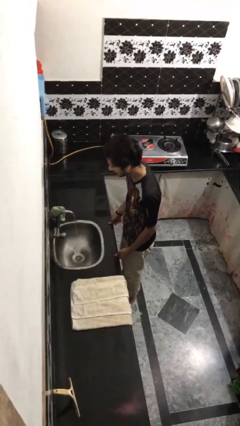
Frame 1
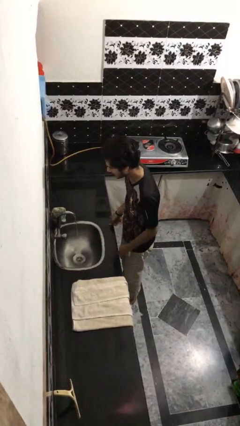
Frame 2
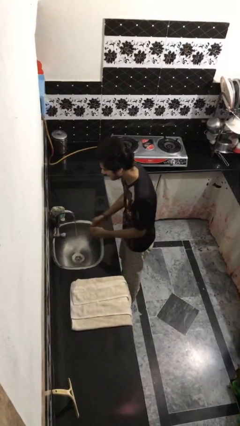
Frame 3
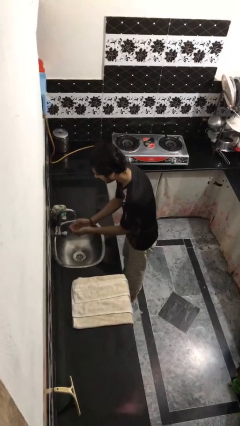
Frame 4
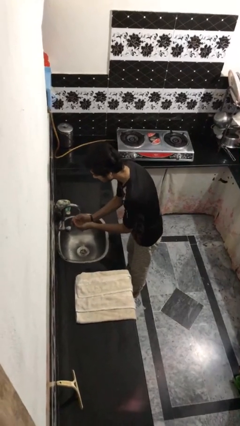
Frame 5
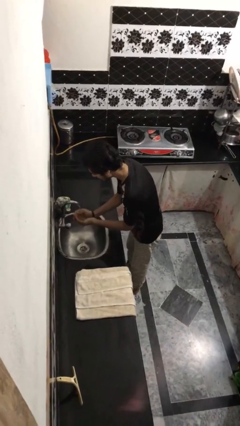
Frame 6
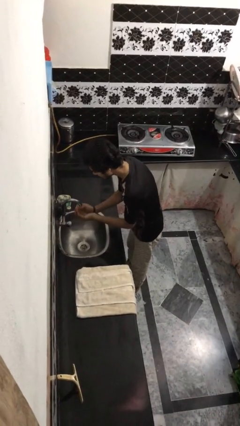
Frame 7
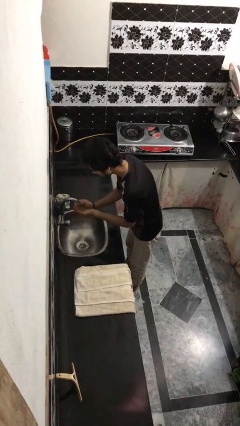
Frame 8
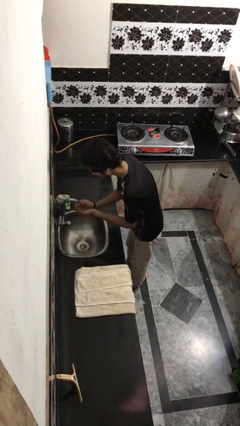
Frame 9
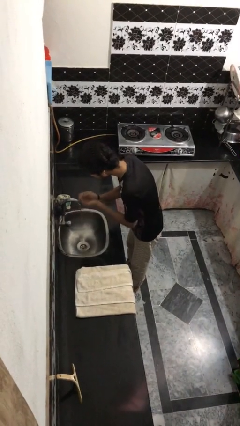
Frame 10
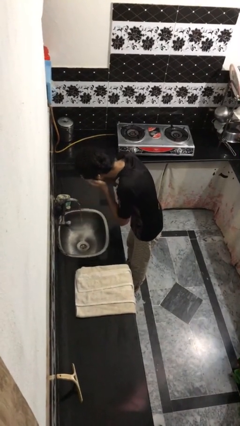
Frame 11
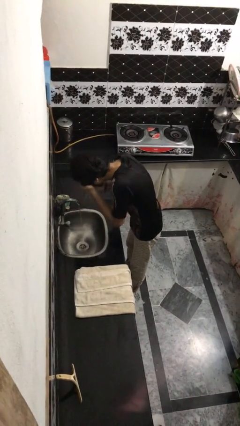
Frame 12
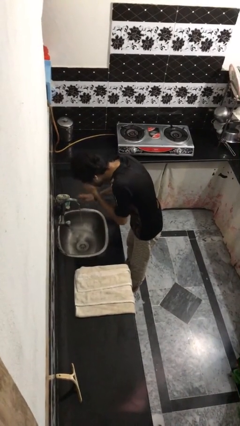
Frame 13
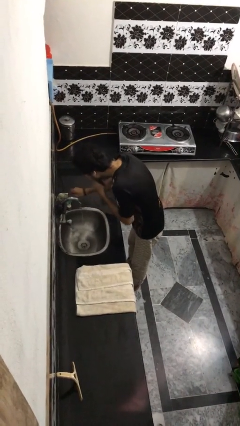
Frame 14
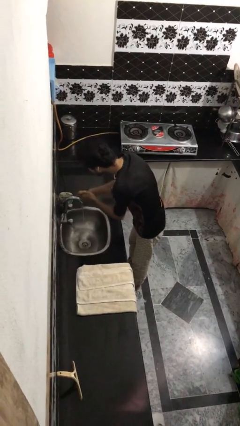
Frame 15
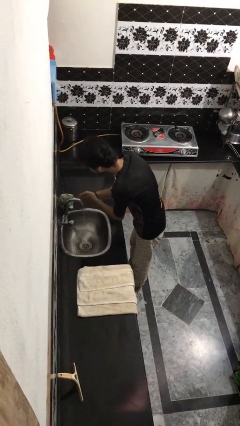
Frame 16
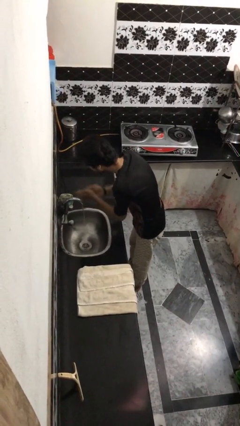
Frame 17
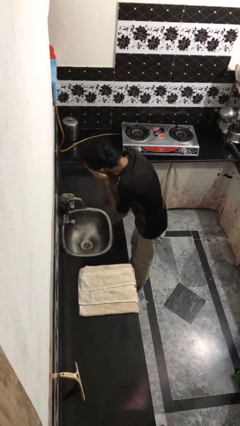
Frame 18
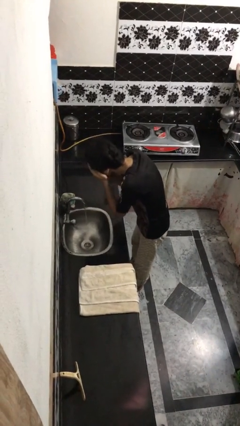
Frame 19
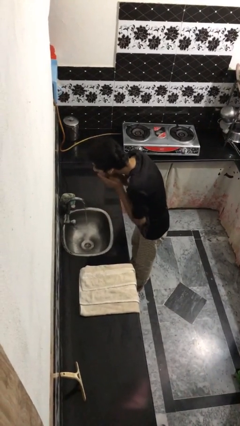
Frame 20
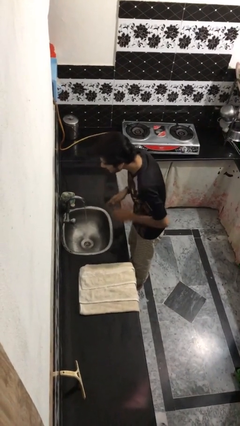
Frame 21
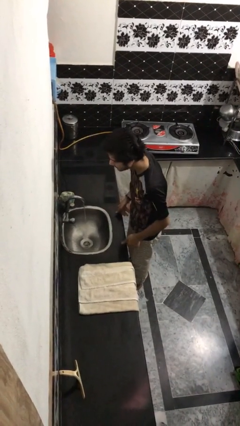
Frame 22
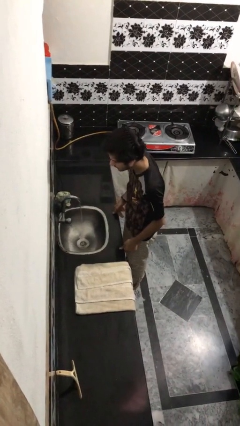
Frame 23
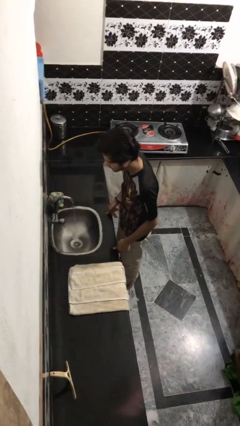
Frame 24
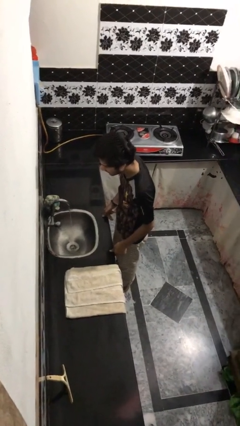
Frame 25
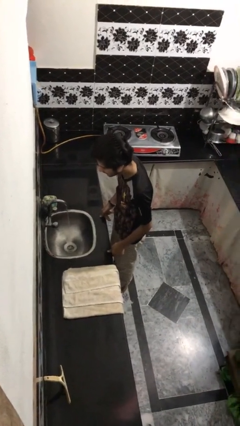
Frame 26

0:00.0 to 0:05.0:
person washes face

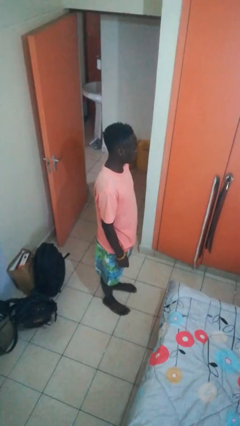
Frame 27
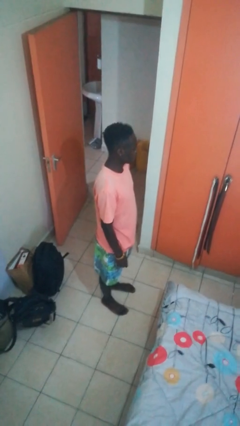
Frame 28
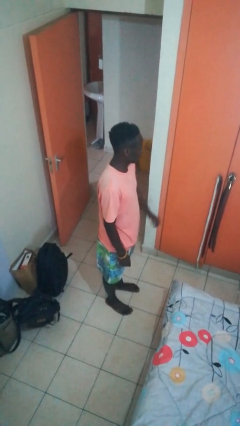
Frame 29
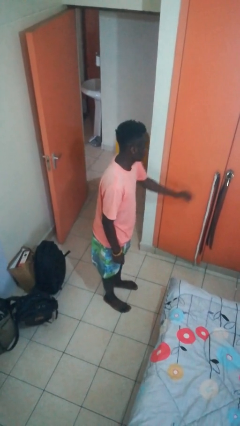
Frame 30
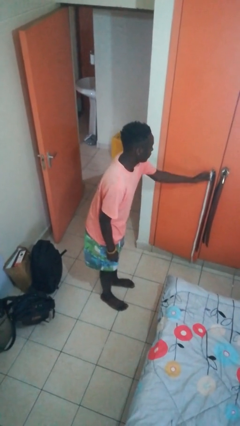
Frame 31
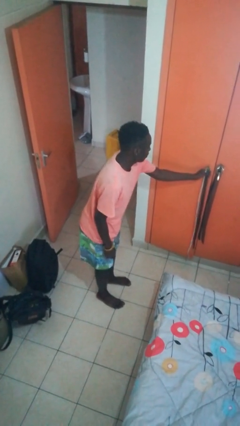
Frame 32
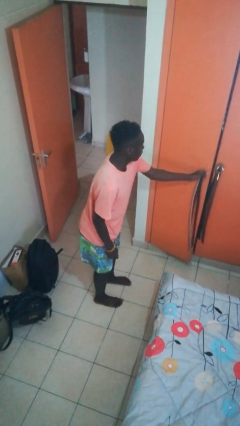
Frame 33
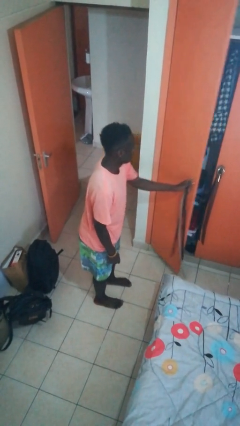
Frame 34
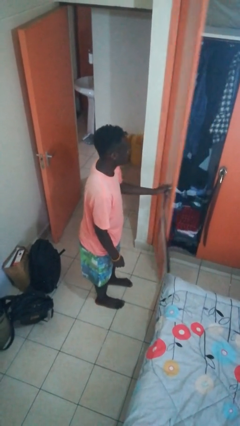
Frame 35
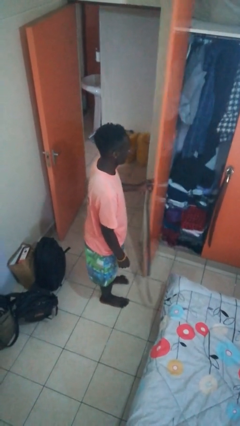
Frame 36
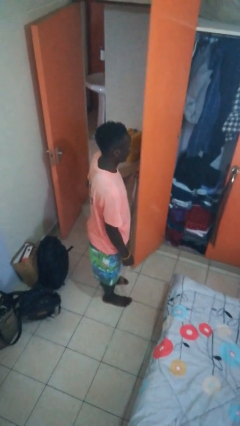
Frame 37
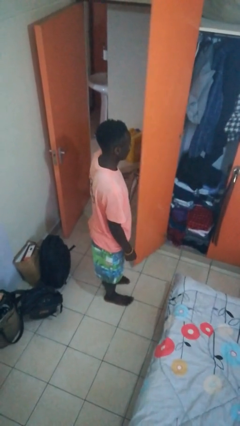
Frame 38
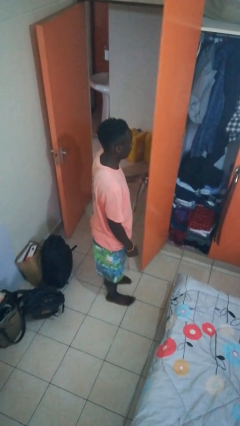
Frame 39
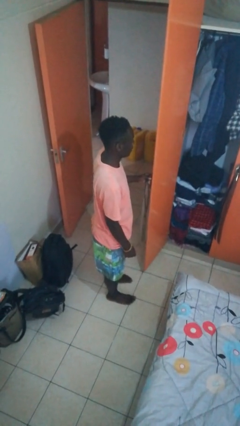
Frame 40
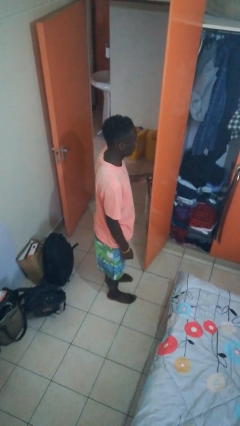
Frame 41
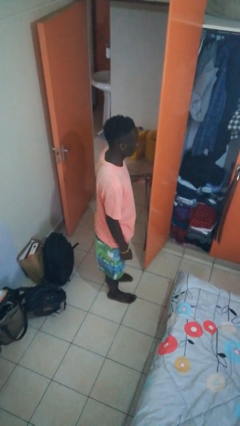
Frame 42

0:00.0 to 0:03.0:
person opens closet door

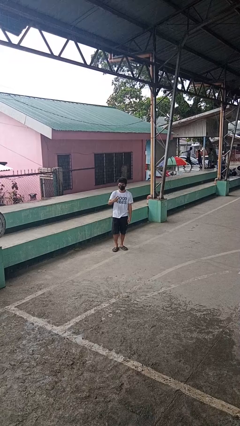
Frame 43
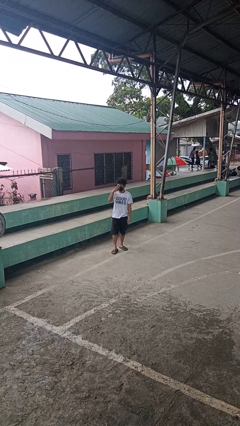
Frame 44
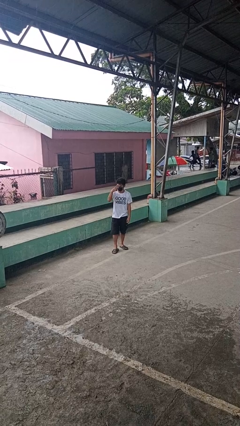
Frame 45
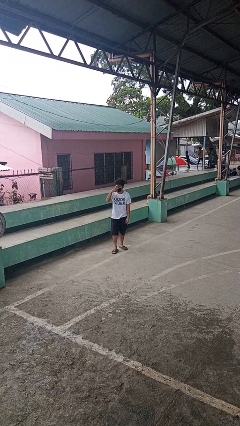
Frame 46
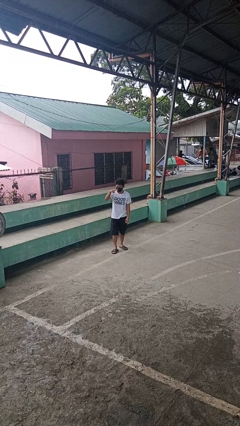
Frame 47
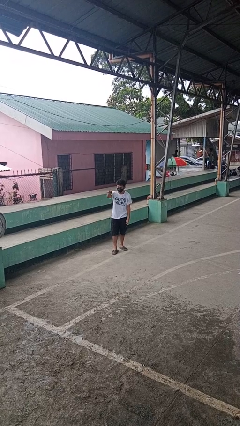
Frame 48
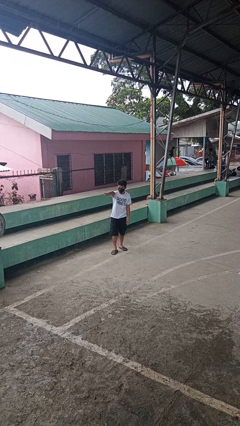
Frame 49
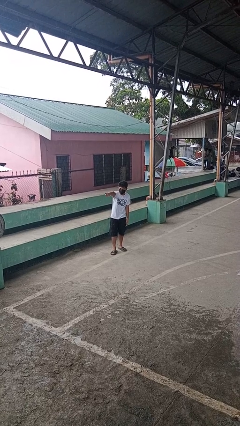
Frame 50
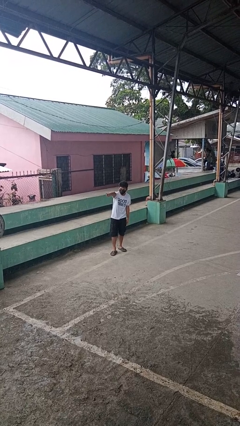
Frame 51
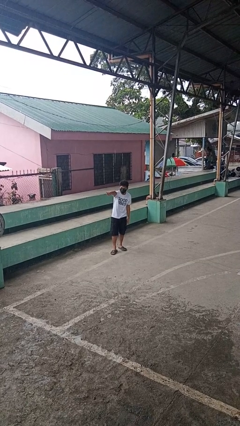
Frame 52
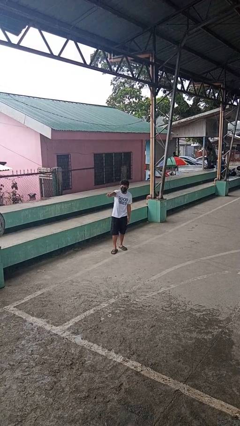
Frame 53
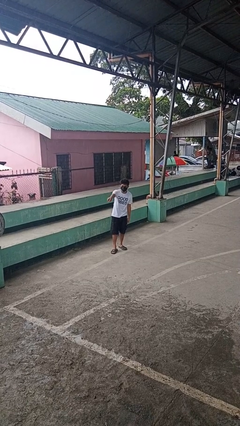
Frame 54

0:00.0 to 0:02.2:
person gestures watch closely

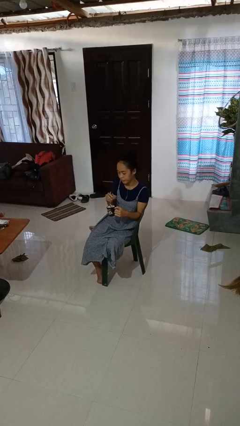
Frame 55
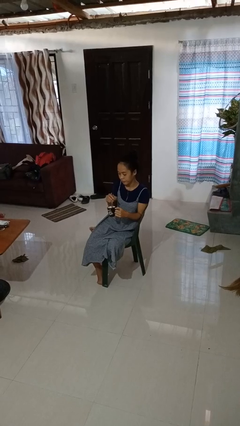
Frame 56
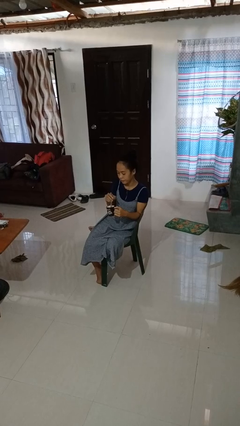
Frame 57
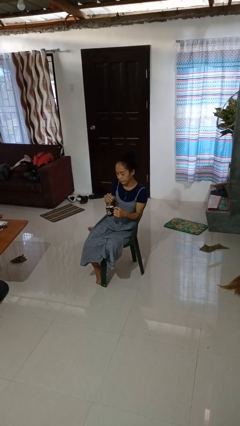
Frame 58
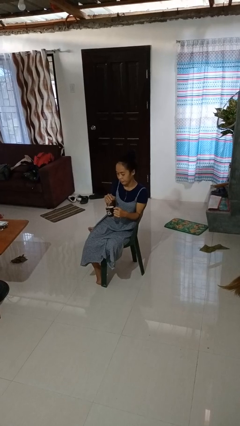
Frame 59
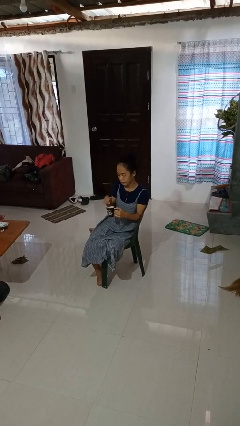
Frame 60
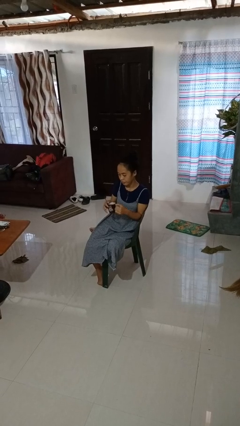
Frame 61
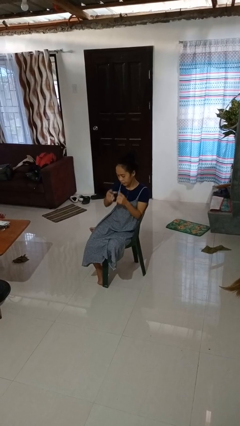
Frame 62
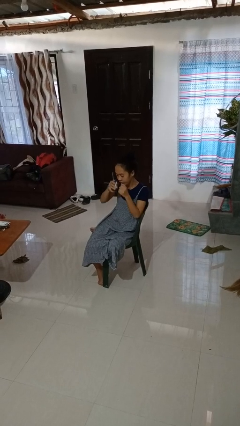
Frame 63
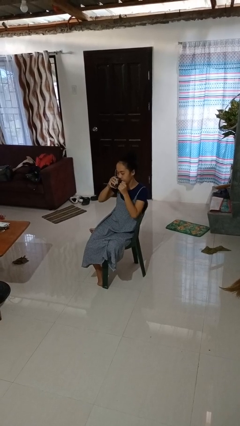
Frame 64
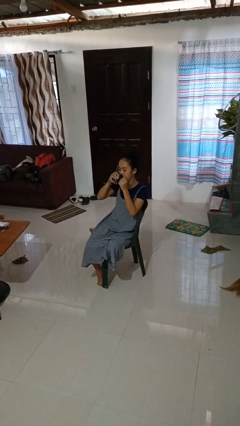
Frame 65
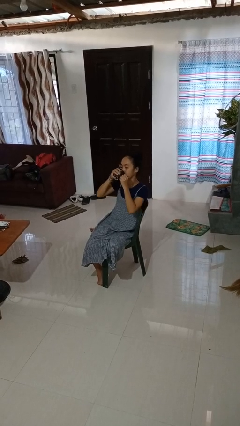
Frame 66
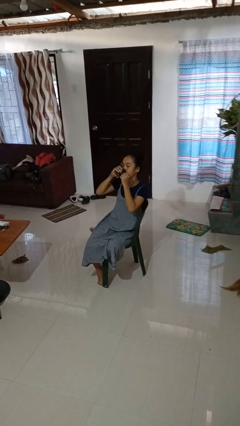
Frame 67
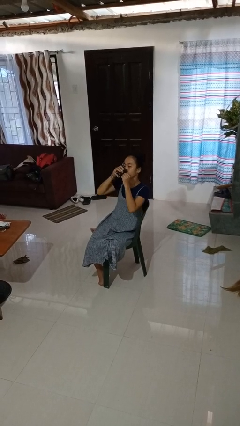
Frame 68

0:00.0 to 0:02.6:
person stirs mug

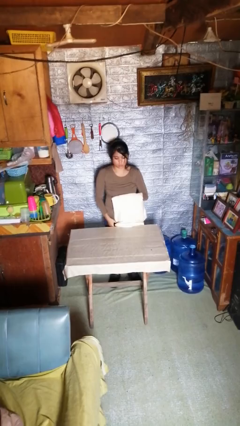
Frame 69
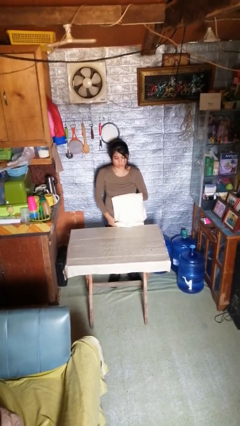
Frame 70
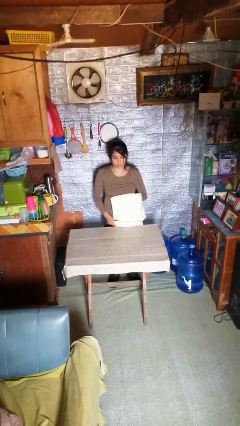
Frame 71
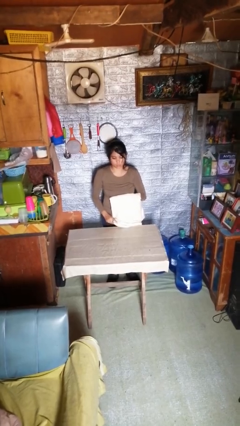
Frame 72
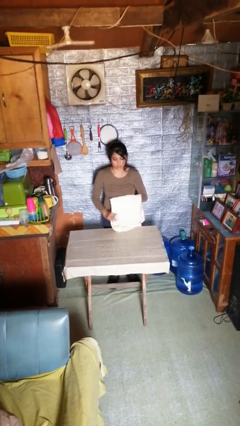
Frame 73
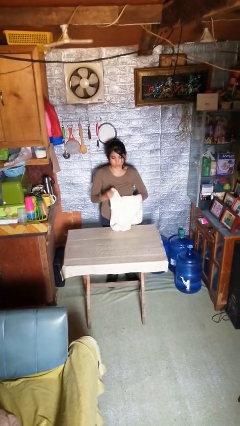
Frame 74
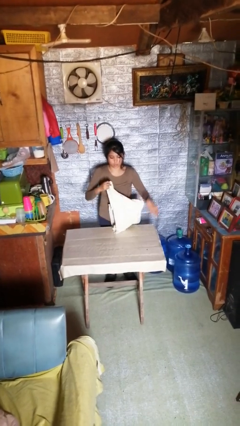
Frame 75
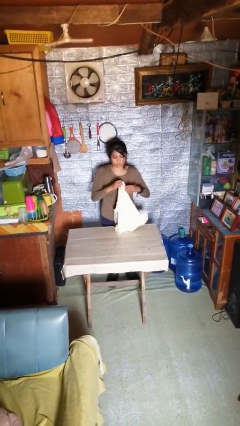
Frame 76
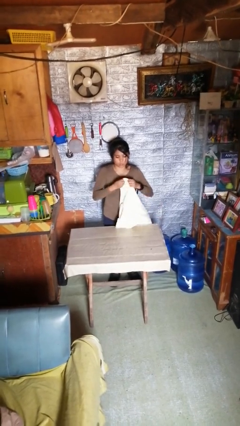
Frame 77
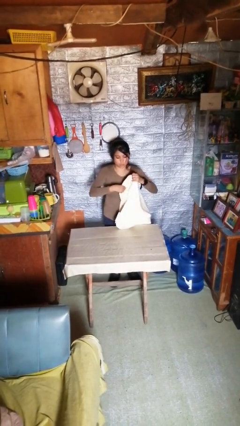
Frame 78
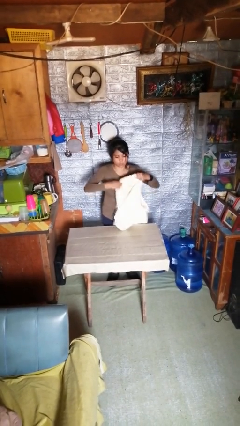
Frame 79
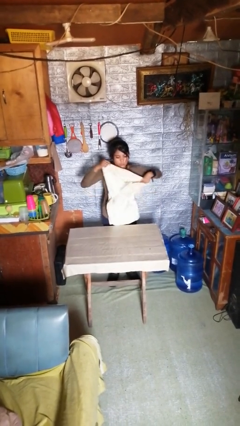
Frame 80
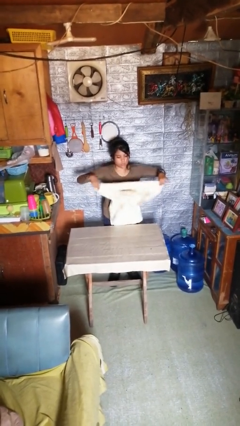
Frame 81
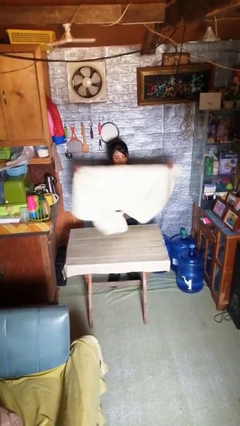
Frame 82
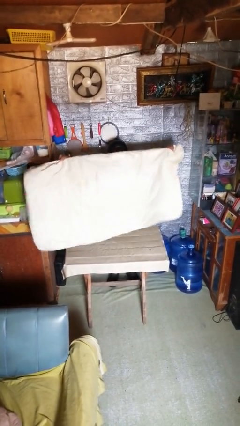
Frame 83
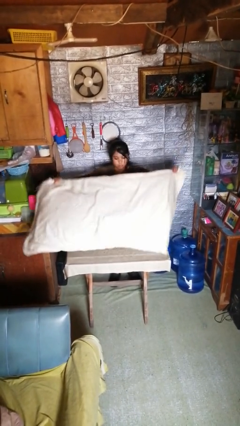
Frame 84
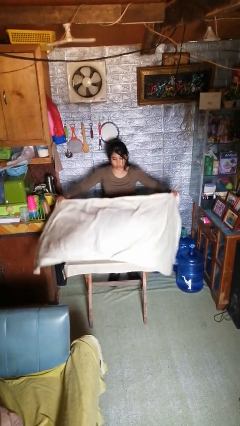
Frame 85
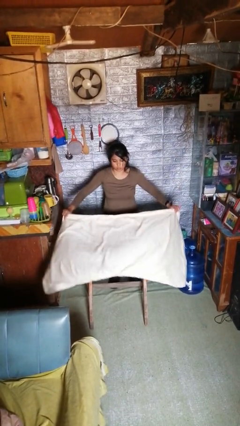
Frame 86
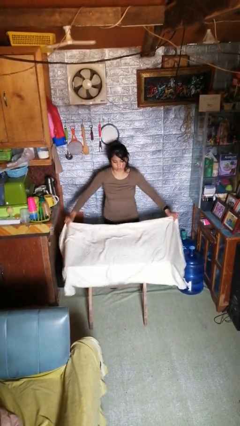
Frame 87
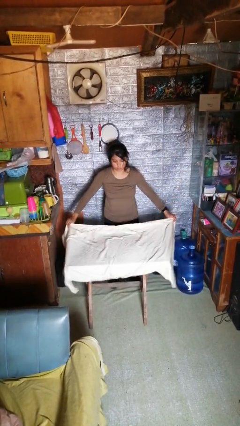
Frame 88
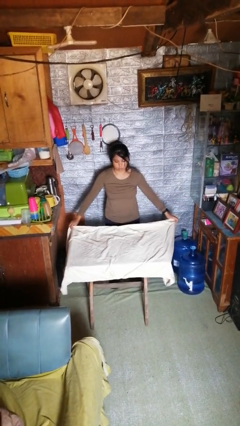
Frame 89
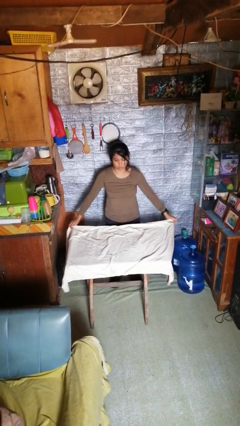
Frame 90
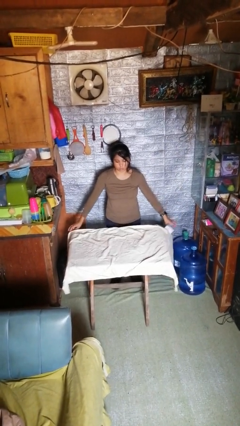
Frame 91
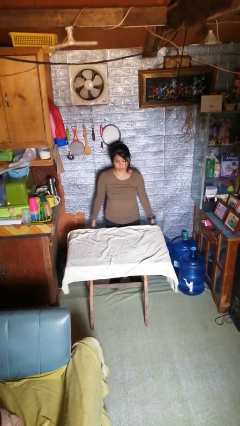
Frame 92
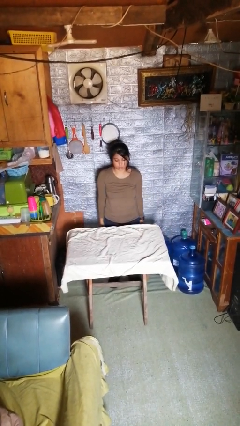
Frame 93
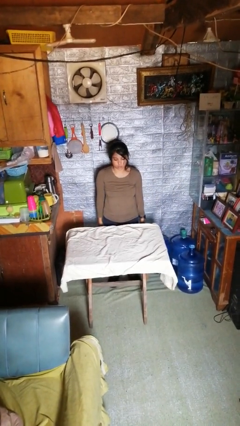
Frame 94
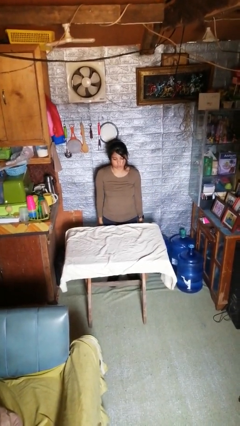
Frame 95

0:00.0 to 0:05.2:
person spreads tablecloth
